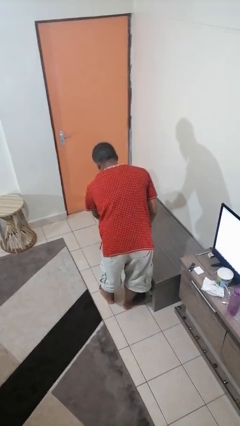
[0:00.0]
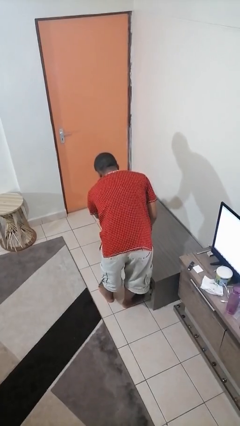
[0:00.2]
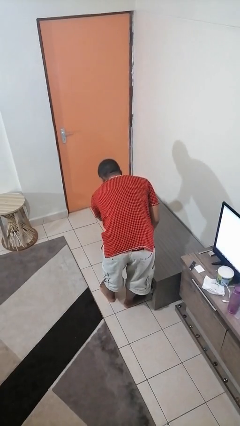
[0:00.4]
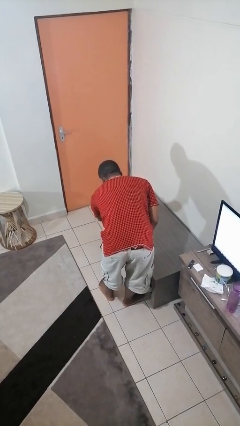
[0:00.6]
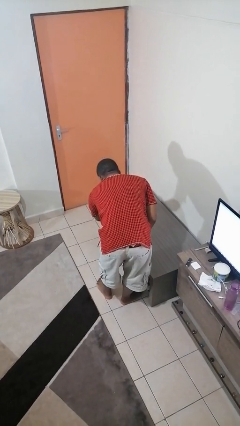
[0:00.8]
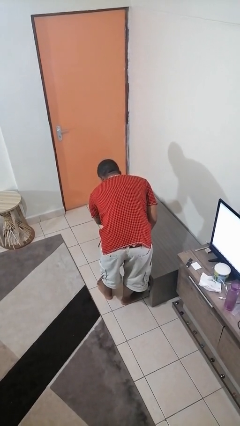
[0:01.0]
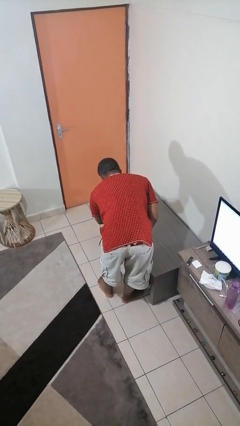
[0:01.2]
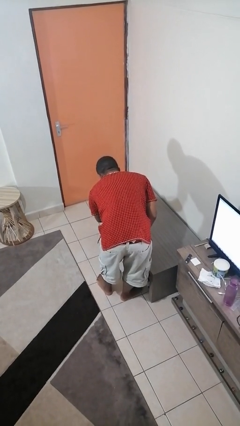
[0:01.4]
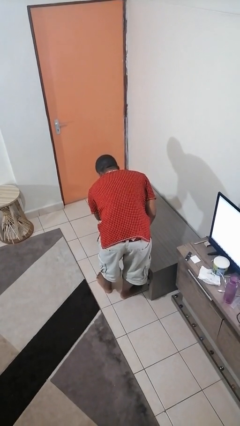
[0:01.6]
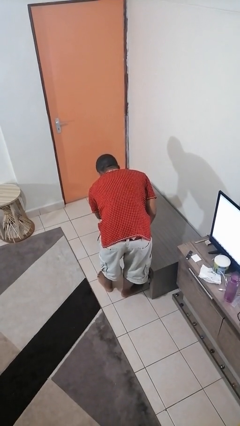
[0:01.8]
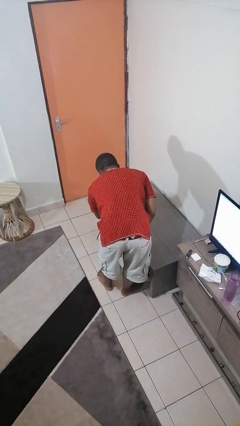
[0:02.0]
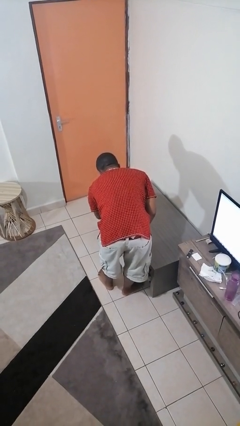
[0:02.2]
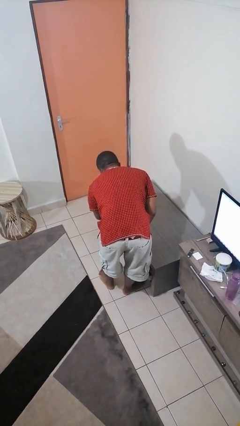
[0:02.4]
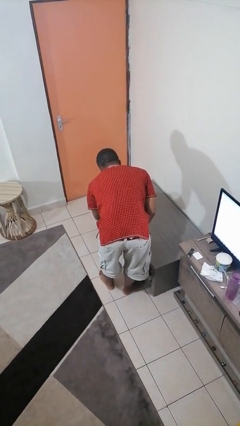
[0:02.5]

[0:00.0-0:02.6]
person sprays from bottle

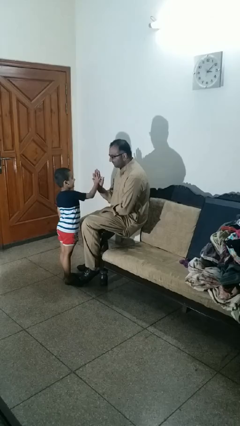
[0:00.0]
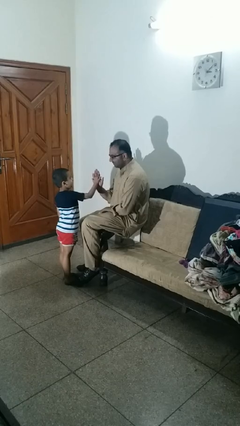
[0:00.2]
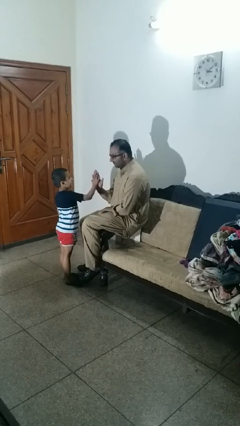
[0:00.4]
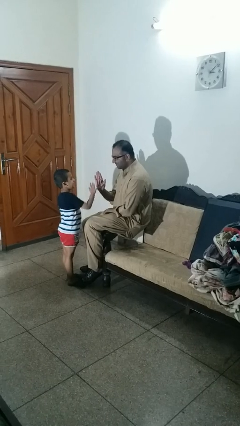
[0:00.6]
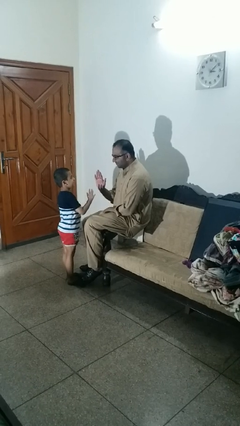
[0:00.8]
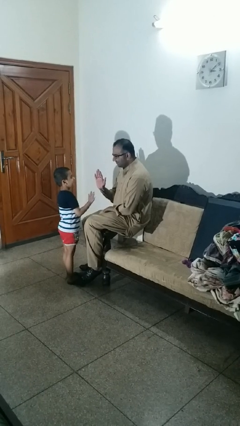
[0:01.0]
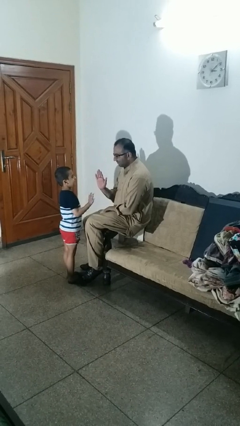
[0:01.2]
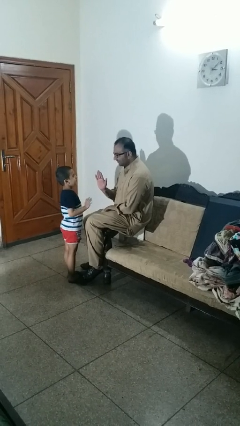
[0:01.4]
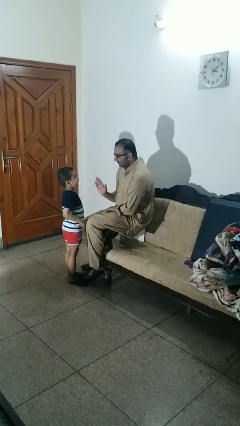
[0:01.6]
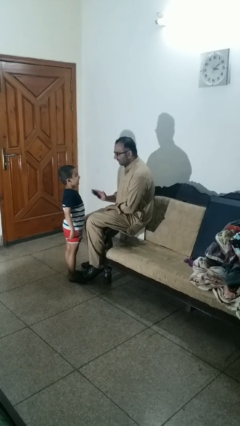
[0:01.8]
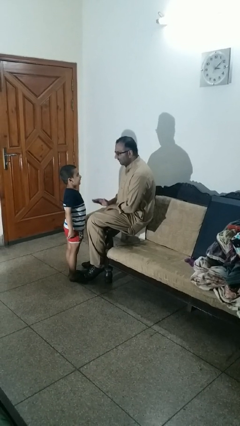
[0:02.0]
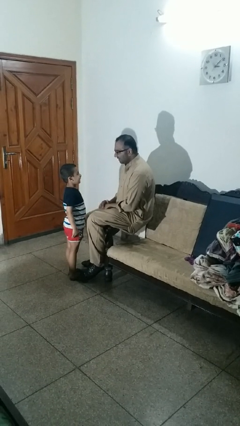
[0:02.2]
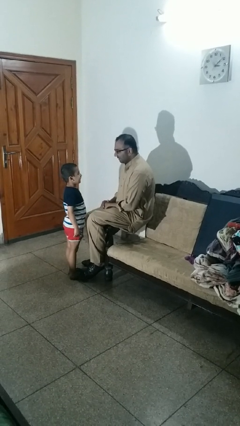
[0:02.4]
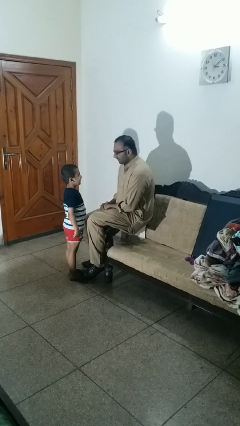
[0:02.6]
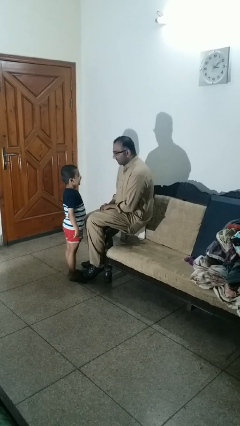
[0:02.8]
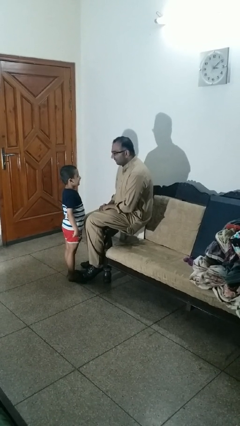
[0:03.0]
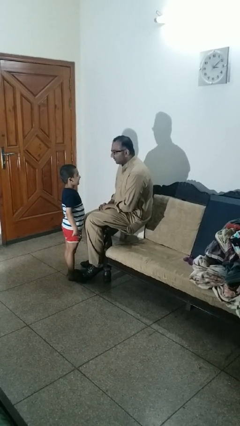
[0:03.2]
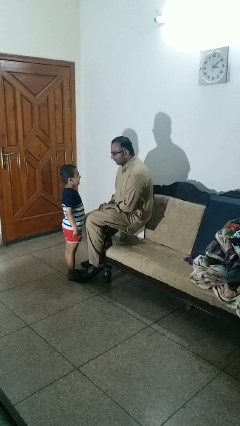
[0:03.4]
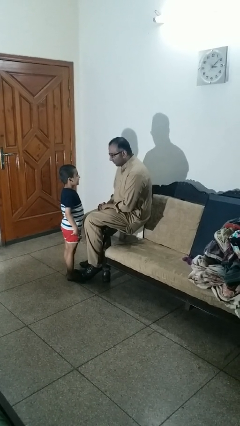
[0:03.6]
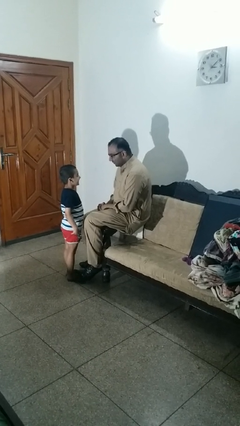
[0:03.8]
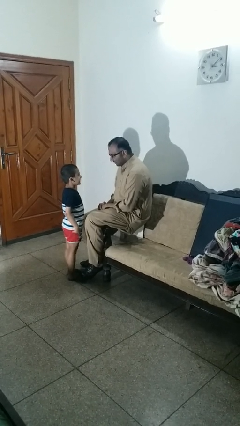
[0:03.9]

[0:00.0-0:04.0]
person highfives hand

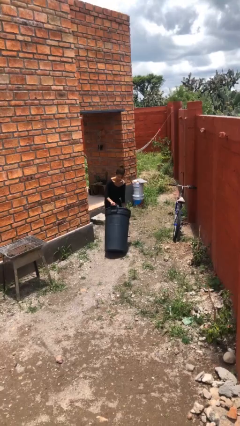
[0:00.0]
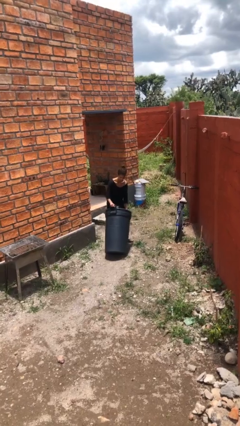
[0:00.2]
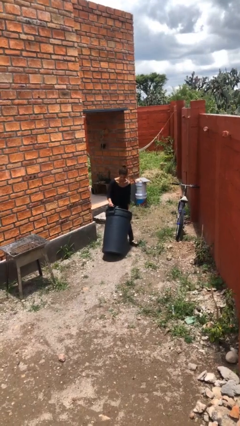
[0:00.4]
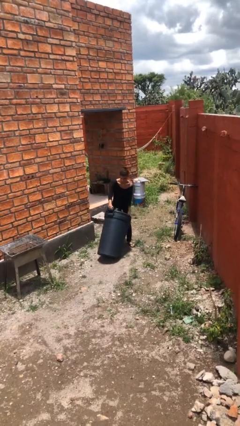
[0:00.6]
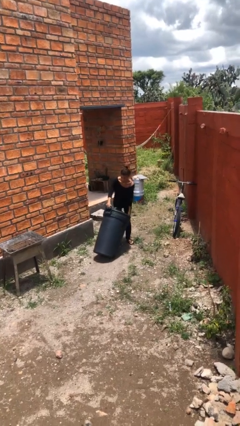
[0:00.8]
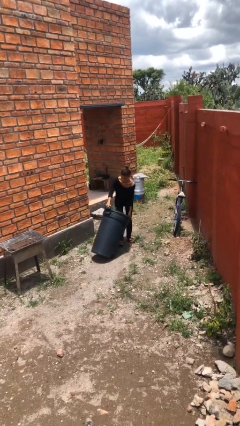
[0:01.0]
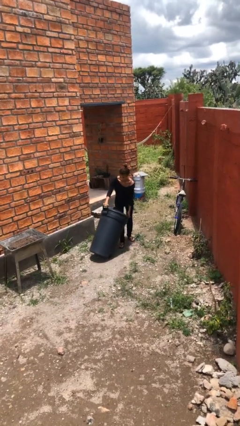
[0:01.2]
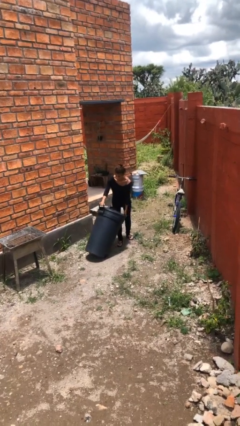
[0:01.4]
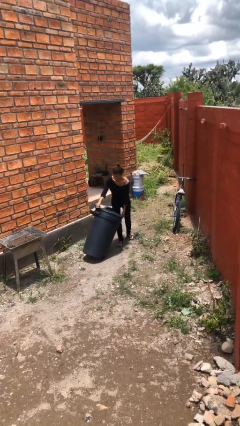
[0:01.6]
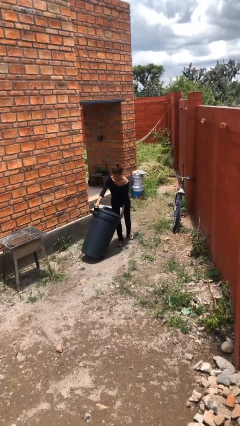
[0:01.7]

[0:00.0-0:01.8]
person pushes wheeled trashcan

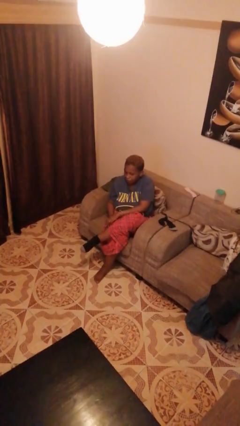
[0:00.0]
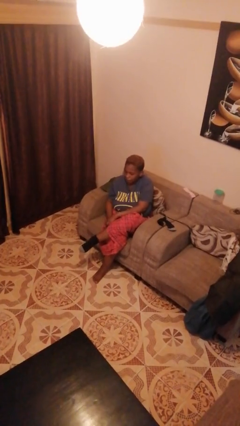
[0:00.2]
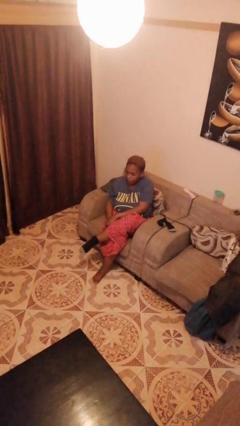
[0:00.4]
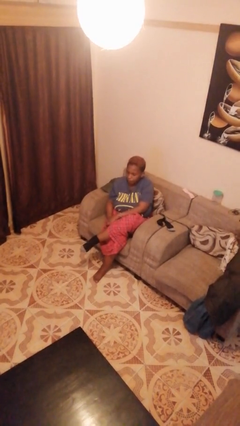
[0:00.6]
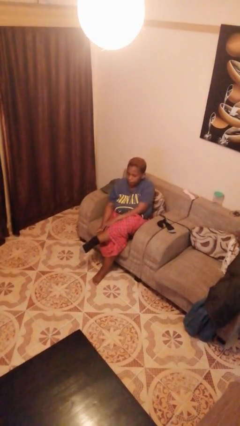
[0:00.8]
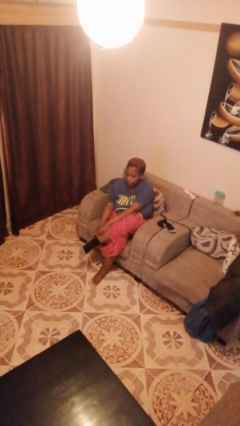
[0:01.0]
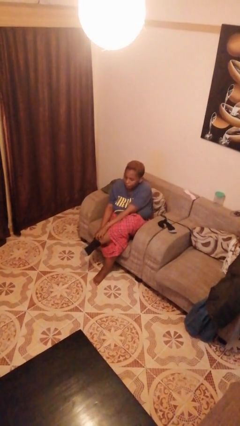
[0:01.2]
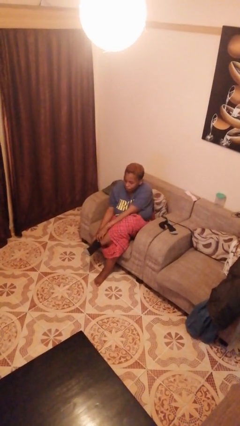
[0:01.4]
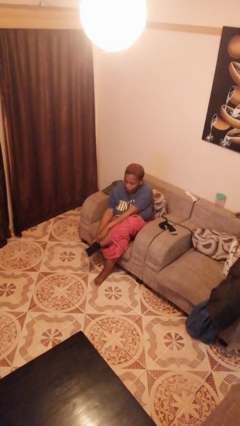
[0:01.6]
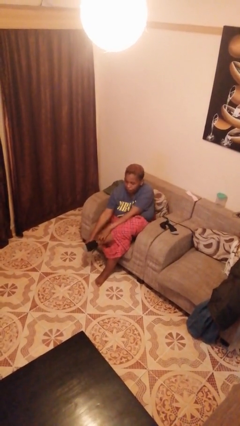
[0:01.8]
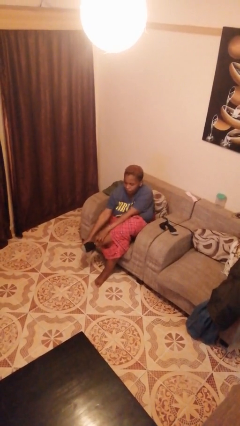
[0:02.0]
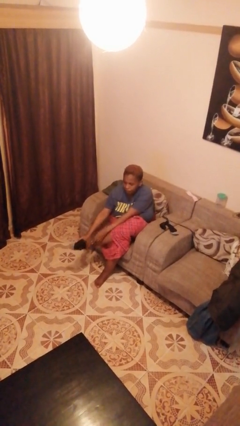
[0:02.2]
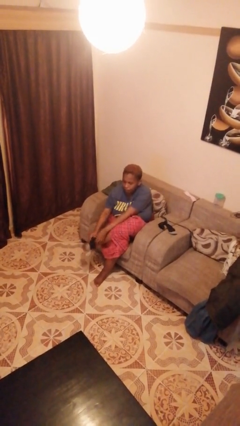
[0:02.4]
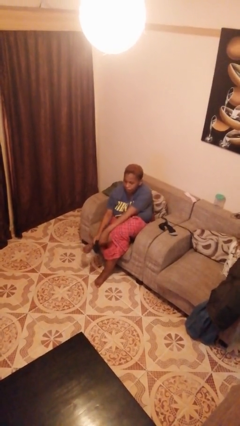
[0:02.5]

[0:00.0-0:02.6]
person takes off socks

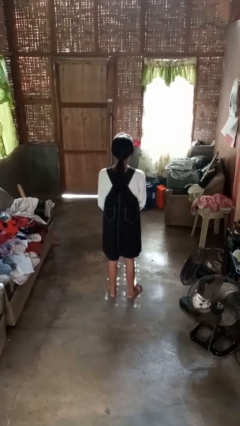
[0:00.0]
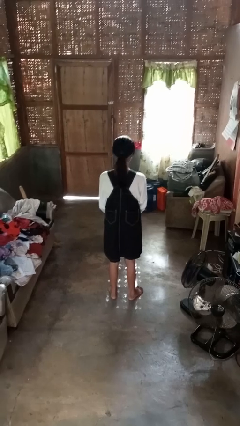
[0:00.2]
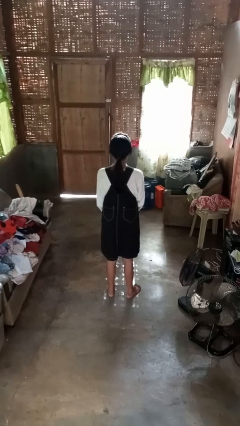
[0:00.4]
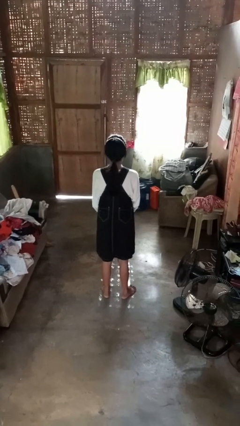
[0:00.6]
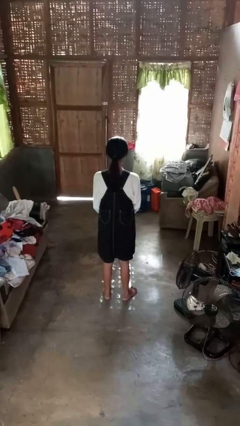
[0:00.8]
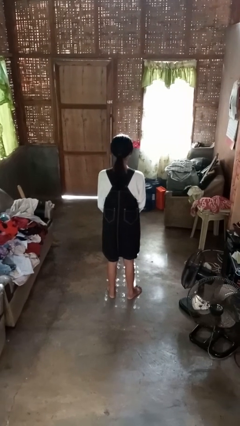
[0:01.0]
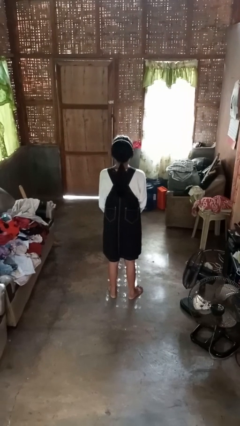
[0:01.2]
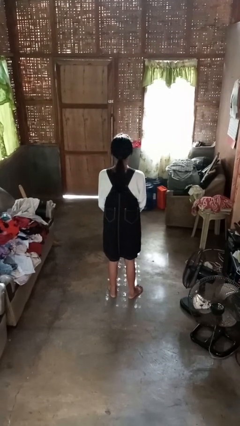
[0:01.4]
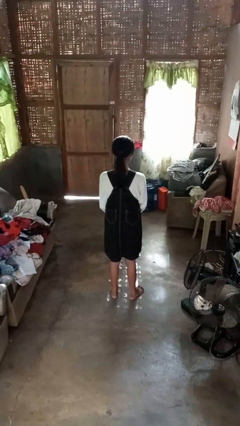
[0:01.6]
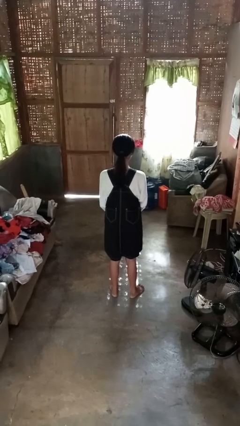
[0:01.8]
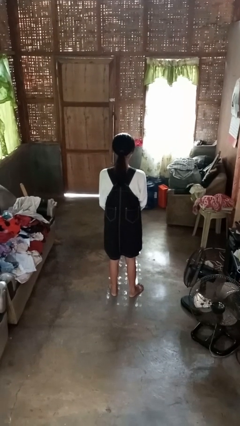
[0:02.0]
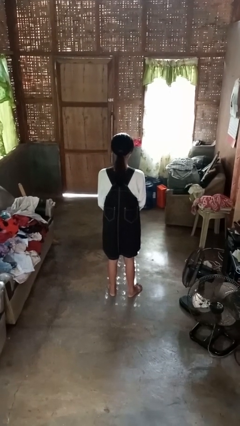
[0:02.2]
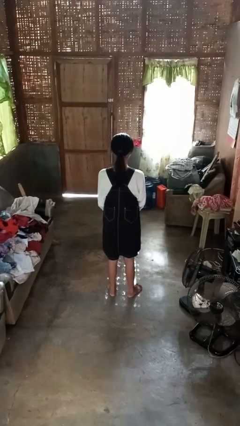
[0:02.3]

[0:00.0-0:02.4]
person nods head

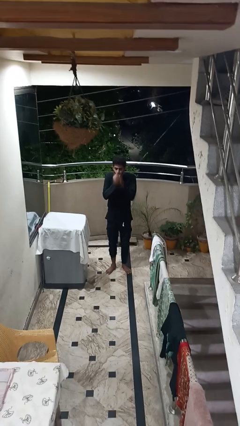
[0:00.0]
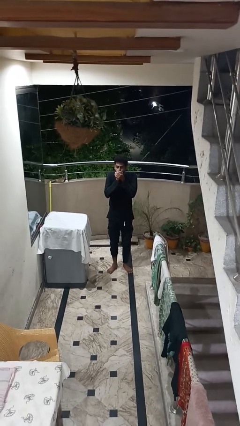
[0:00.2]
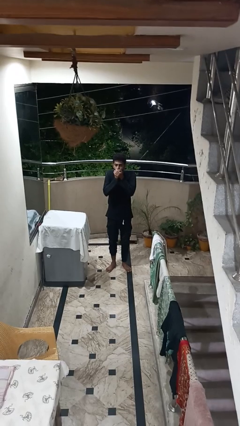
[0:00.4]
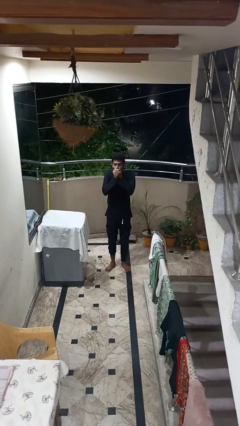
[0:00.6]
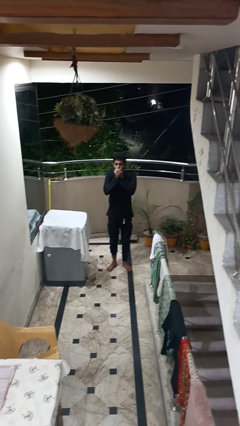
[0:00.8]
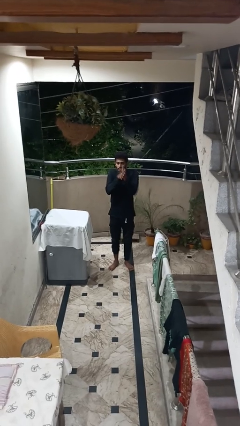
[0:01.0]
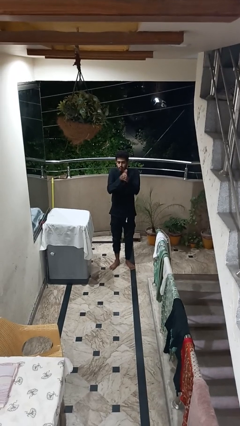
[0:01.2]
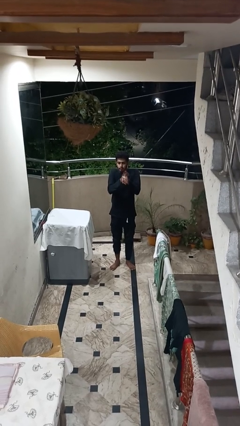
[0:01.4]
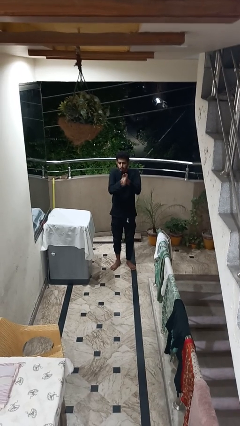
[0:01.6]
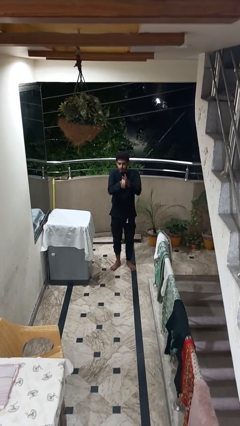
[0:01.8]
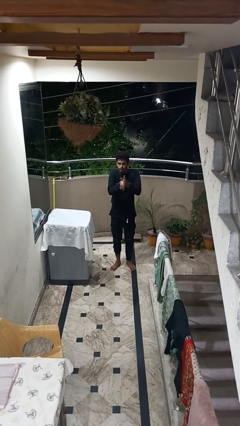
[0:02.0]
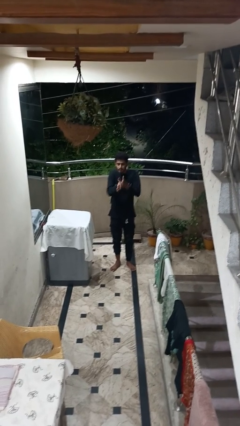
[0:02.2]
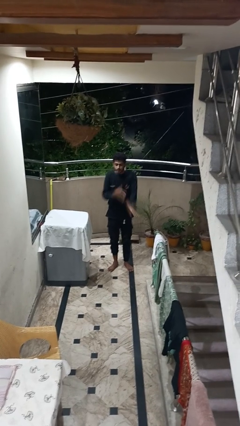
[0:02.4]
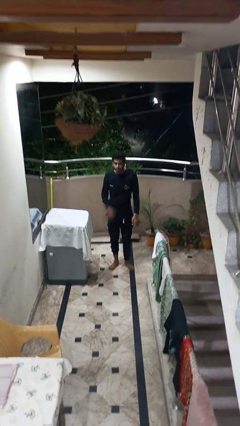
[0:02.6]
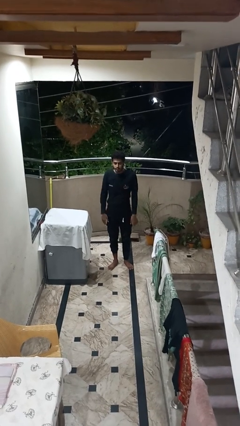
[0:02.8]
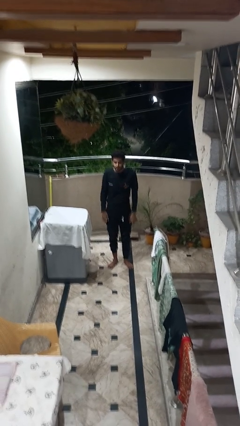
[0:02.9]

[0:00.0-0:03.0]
person blows into hands

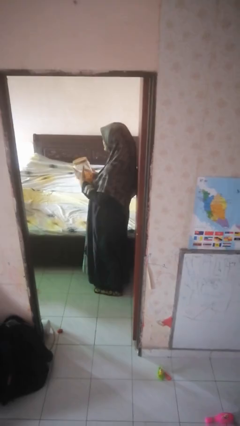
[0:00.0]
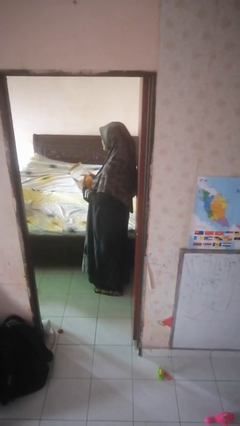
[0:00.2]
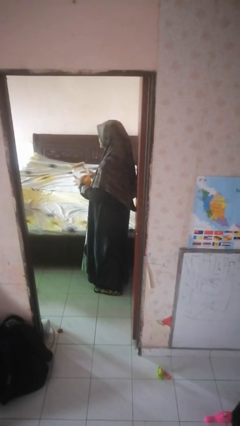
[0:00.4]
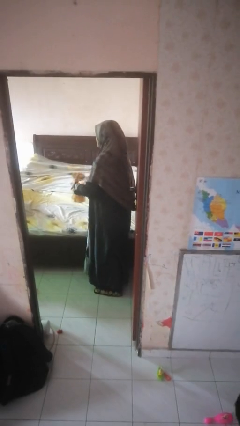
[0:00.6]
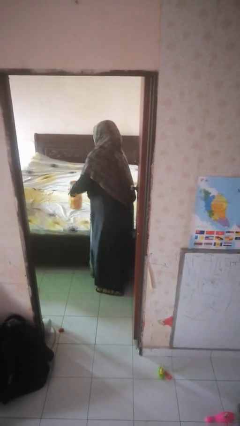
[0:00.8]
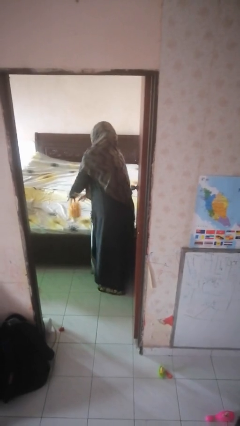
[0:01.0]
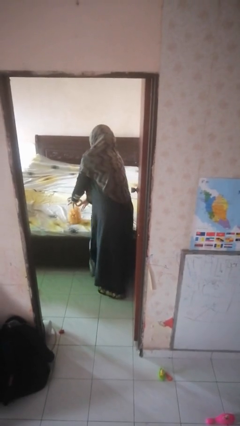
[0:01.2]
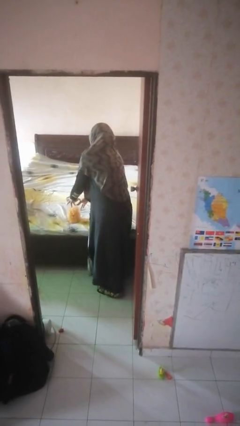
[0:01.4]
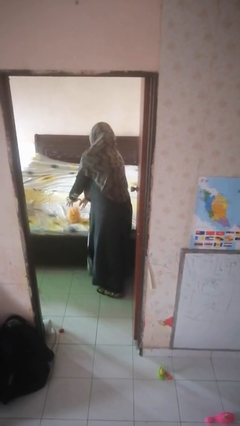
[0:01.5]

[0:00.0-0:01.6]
person puts down object on bed
